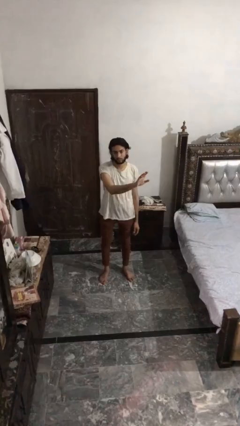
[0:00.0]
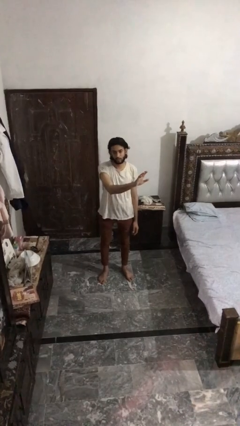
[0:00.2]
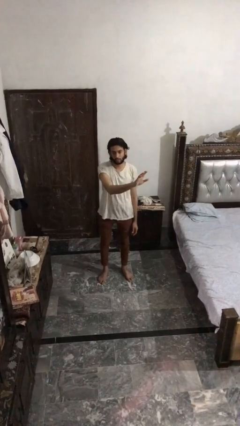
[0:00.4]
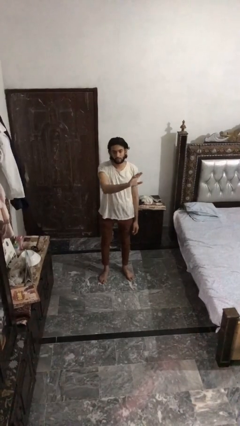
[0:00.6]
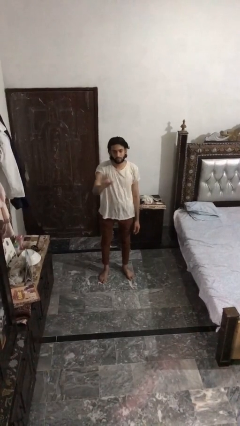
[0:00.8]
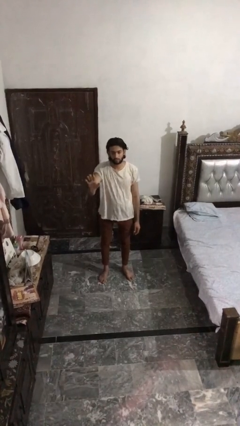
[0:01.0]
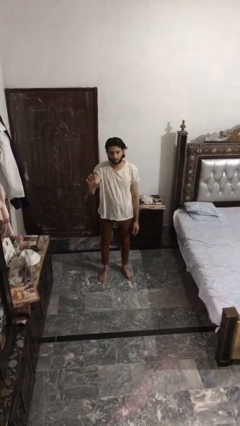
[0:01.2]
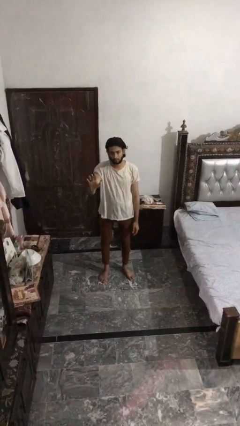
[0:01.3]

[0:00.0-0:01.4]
person gestures swipe right

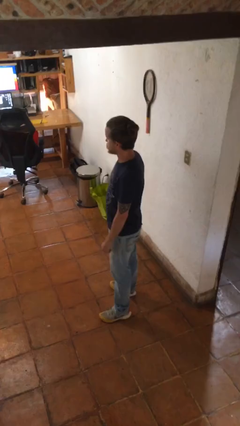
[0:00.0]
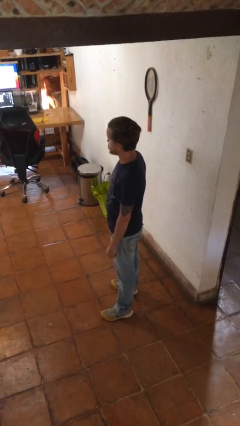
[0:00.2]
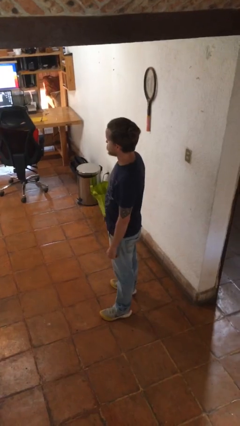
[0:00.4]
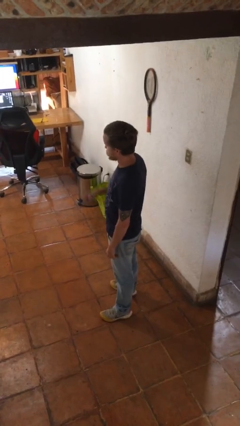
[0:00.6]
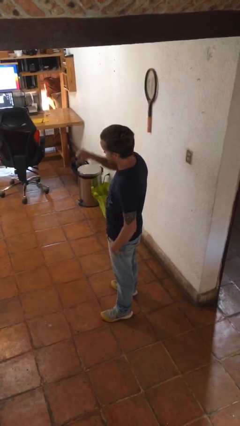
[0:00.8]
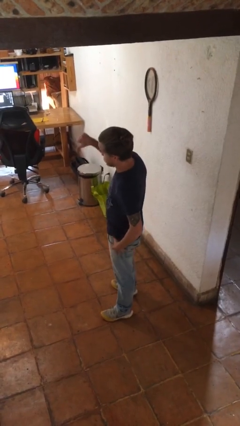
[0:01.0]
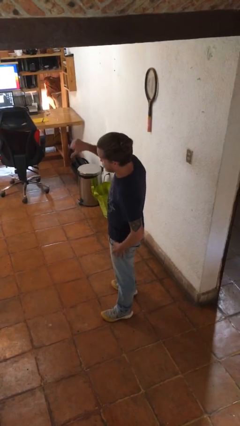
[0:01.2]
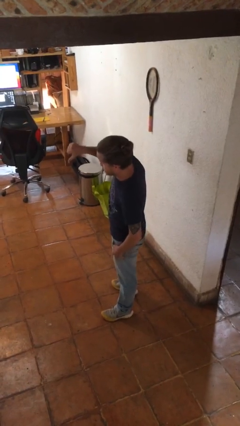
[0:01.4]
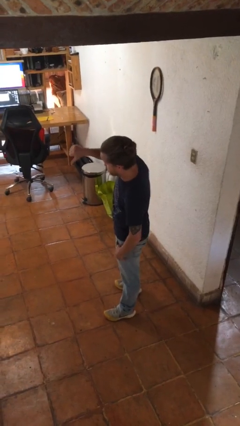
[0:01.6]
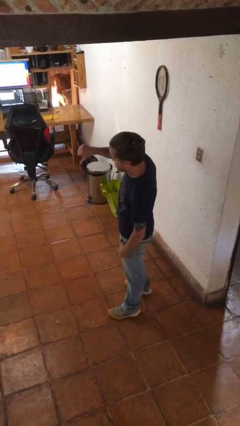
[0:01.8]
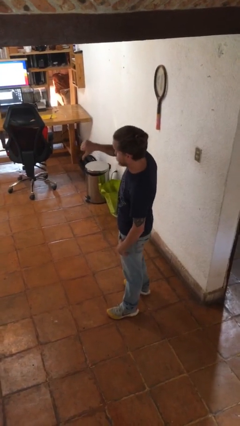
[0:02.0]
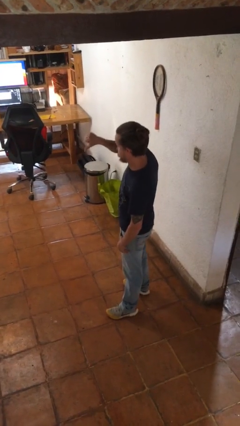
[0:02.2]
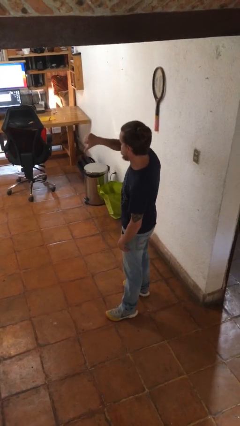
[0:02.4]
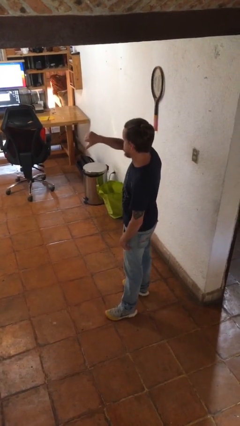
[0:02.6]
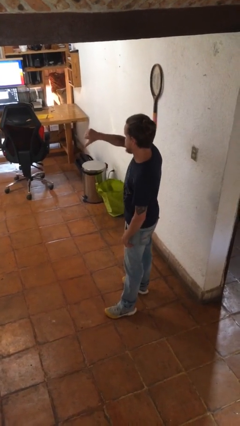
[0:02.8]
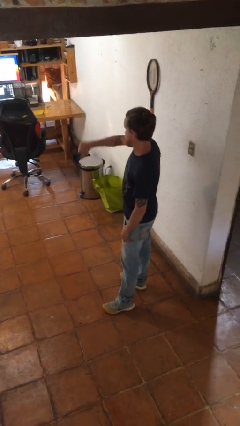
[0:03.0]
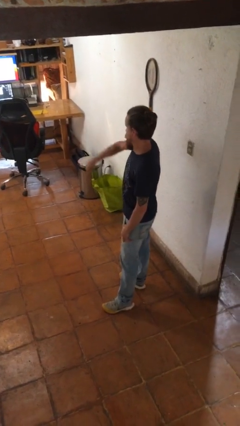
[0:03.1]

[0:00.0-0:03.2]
person gestures thumbs down

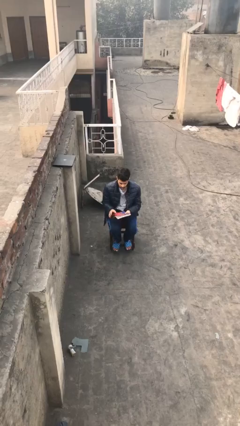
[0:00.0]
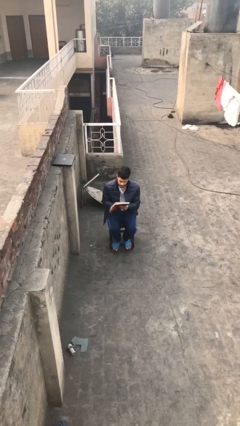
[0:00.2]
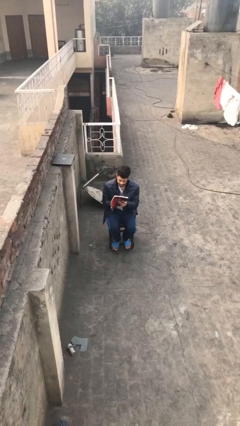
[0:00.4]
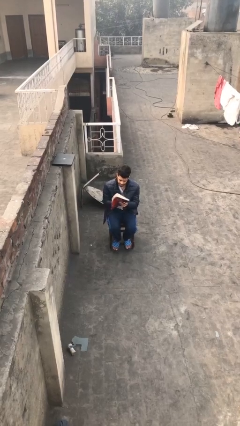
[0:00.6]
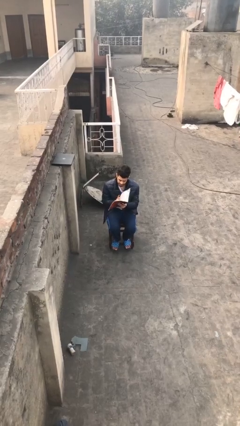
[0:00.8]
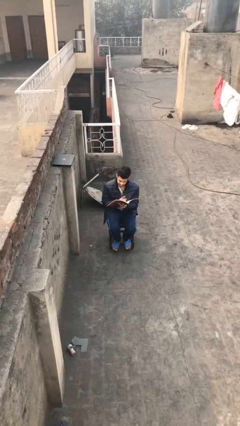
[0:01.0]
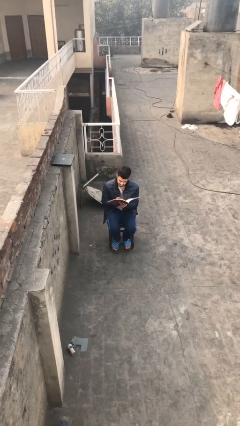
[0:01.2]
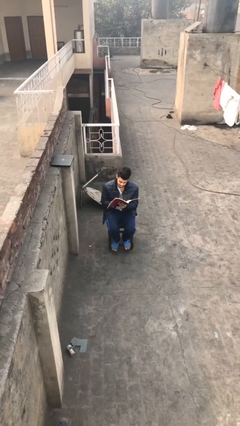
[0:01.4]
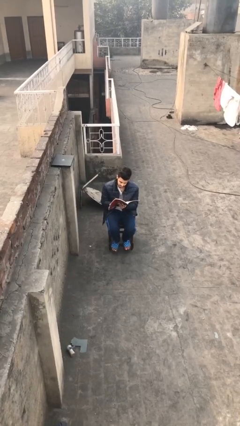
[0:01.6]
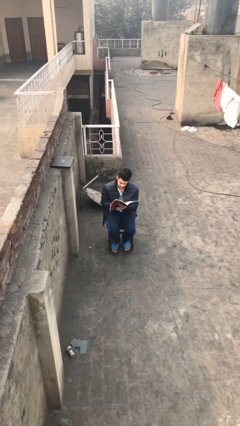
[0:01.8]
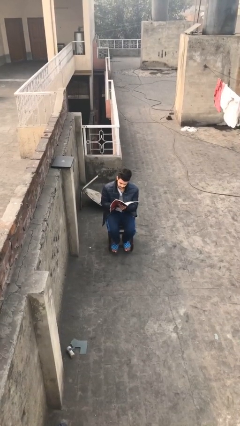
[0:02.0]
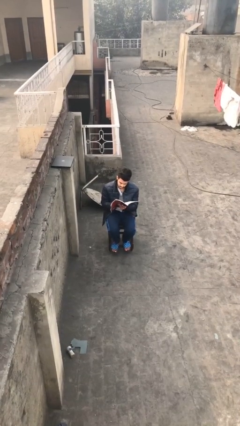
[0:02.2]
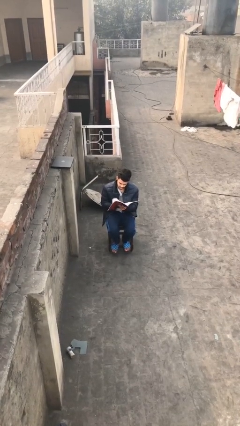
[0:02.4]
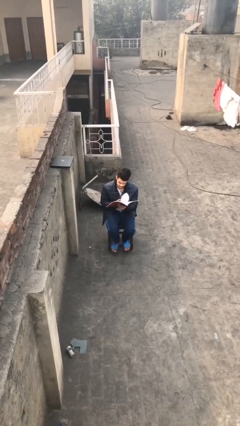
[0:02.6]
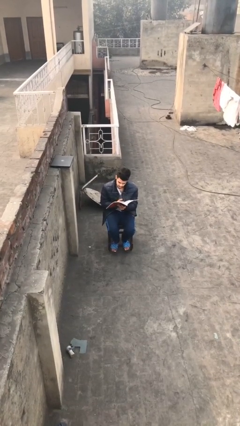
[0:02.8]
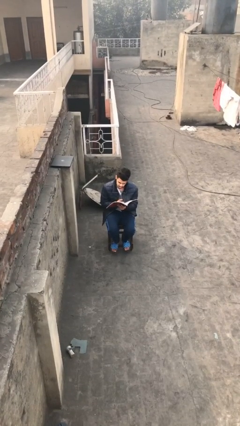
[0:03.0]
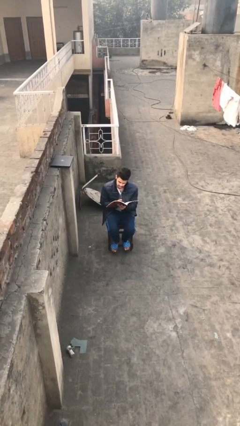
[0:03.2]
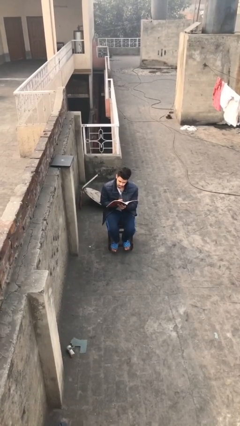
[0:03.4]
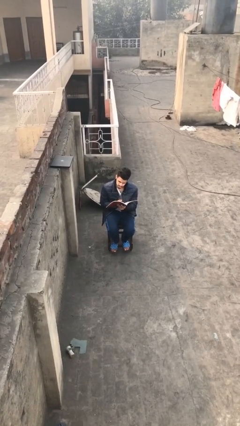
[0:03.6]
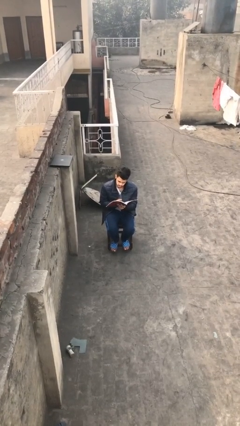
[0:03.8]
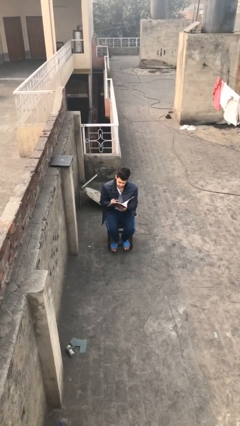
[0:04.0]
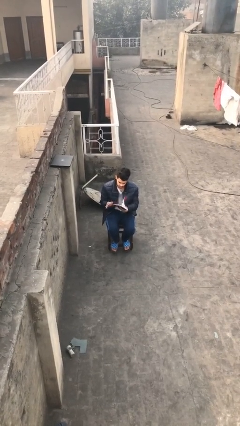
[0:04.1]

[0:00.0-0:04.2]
person reads document

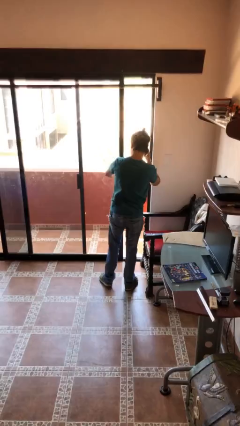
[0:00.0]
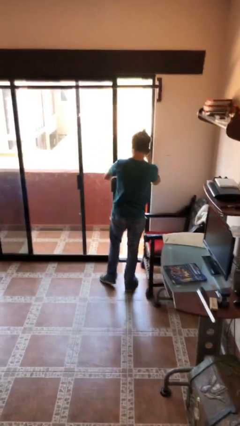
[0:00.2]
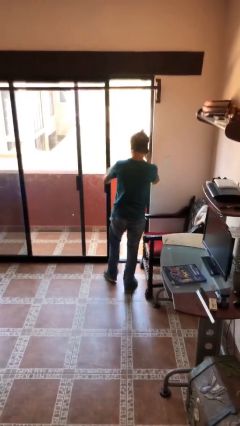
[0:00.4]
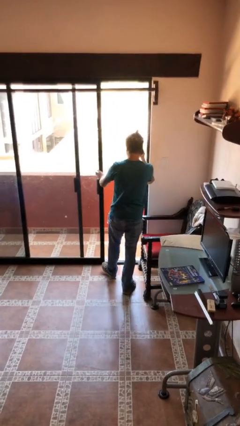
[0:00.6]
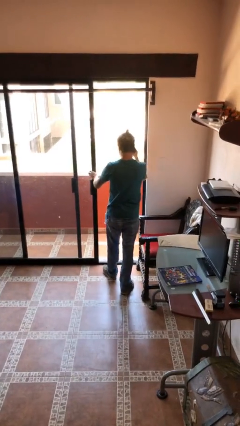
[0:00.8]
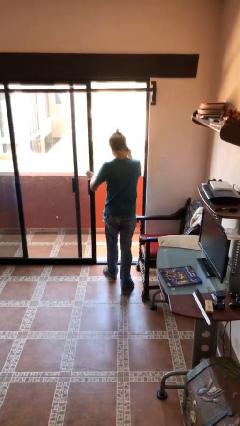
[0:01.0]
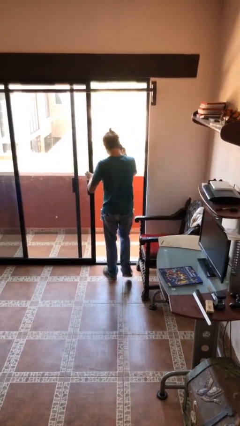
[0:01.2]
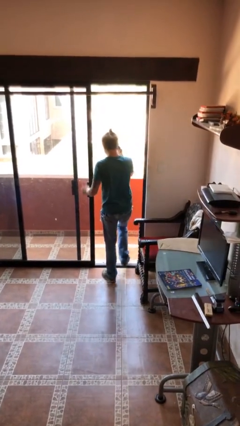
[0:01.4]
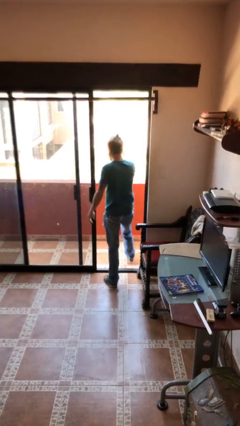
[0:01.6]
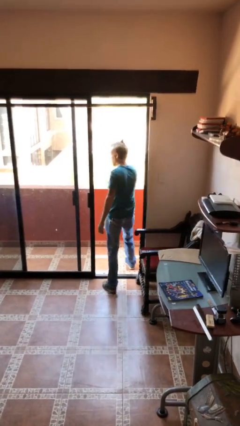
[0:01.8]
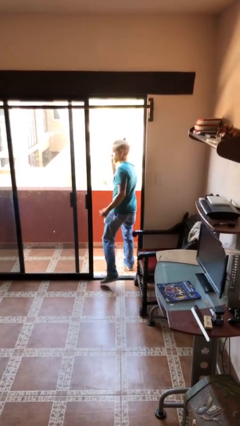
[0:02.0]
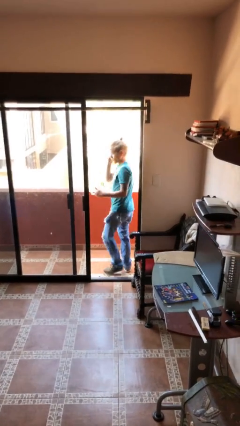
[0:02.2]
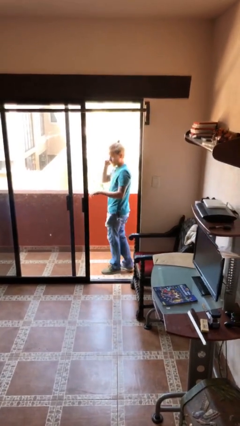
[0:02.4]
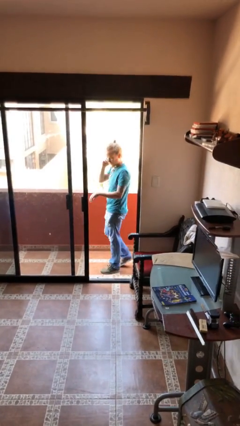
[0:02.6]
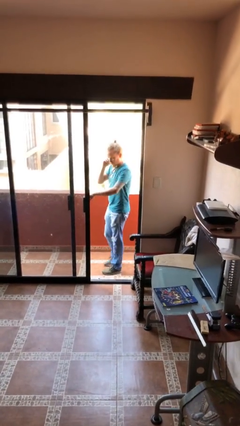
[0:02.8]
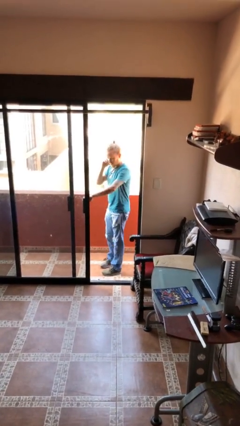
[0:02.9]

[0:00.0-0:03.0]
person exits scene through structure

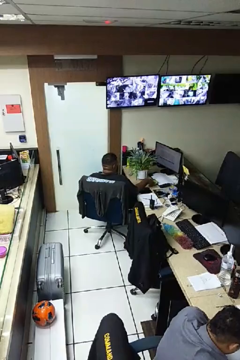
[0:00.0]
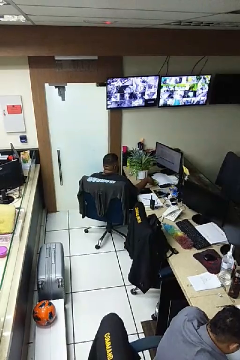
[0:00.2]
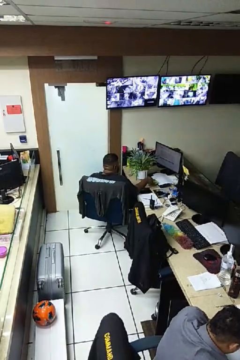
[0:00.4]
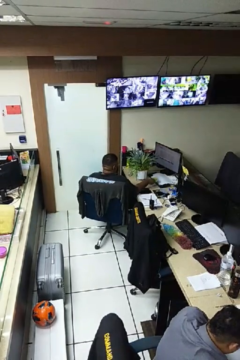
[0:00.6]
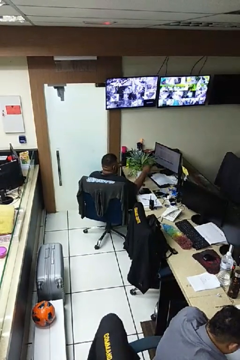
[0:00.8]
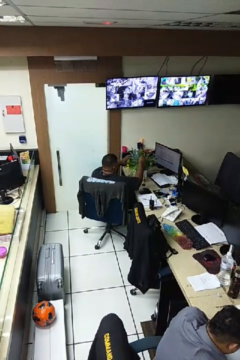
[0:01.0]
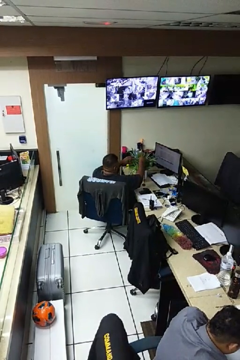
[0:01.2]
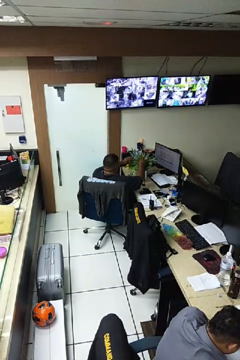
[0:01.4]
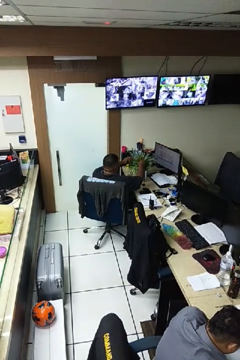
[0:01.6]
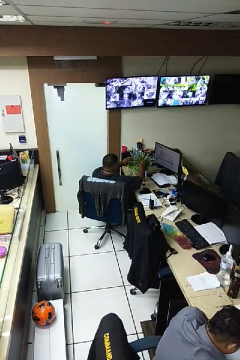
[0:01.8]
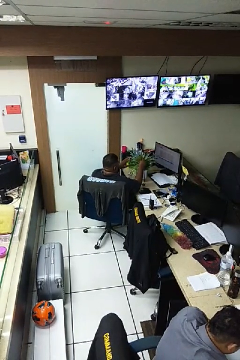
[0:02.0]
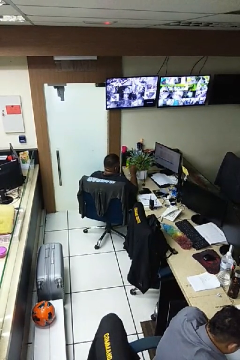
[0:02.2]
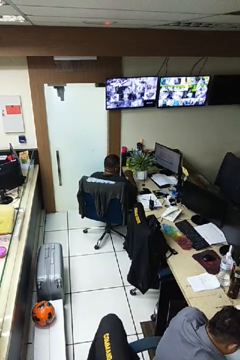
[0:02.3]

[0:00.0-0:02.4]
person arranges flowers in vase

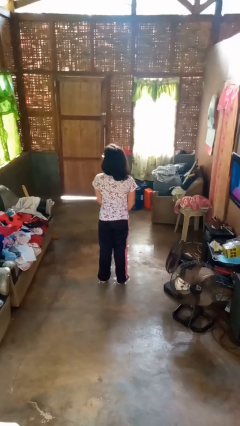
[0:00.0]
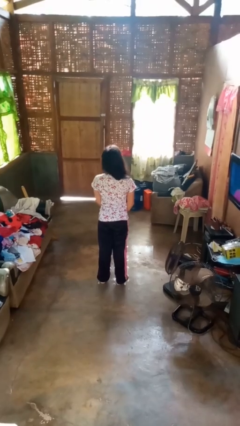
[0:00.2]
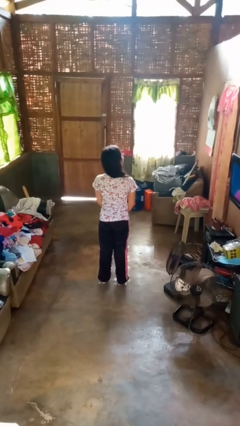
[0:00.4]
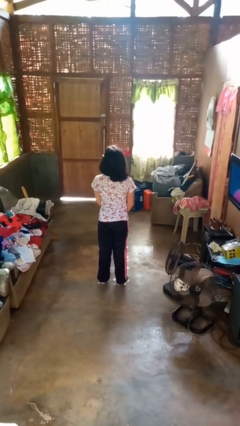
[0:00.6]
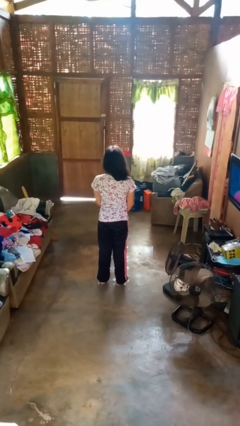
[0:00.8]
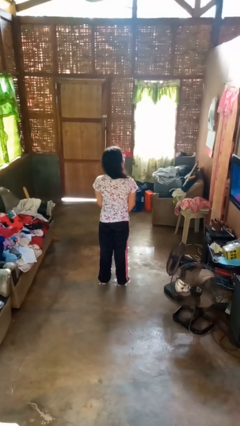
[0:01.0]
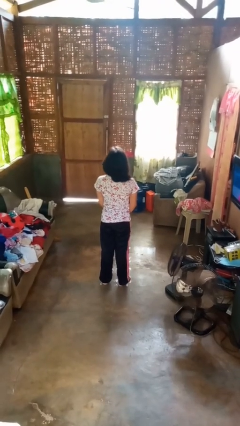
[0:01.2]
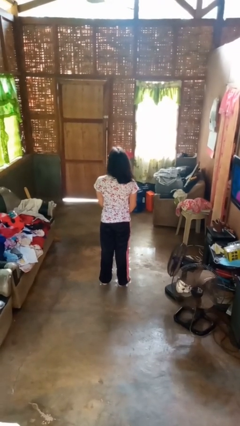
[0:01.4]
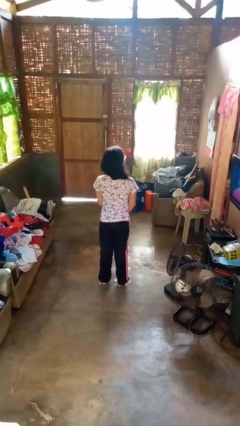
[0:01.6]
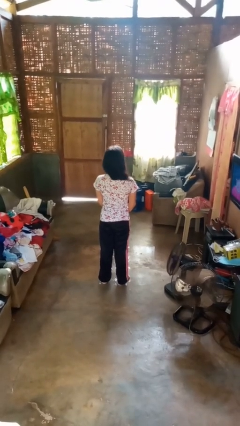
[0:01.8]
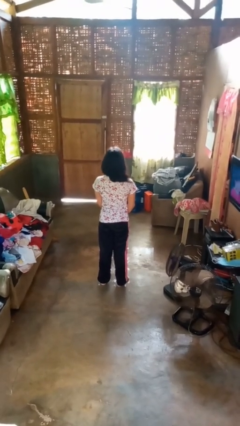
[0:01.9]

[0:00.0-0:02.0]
person shakes head

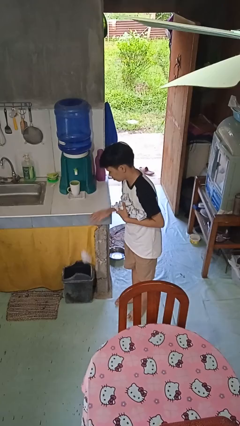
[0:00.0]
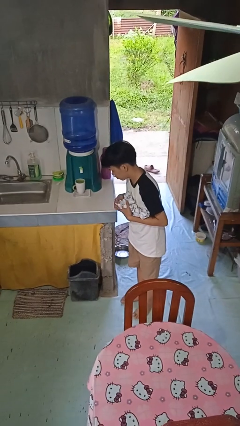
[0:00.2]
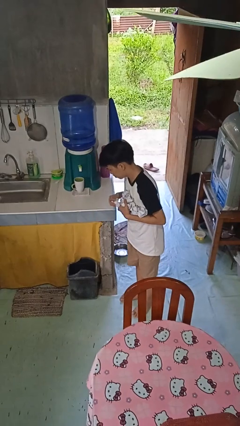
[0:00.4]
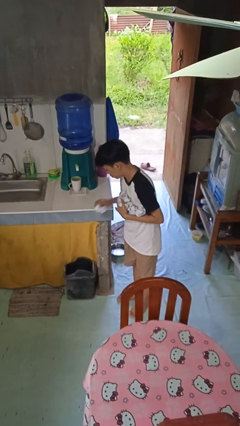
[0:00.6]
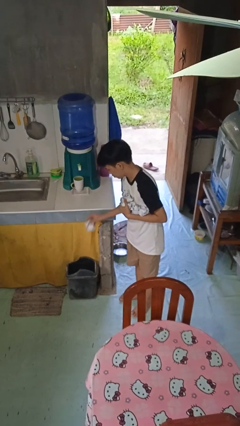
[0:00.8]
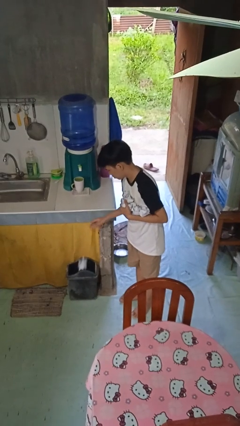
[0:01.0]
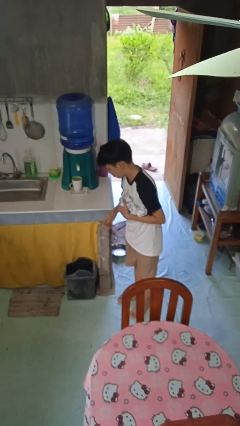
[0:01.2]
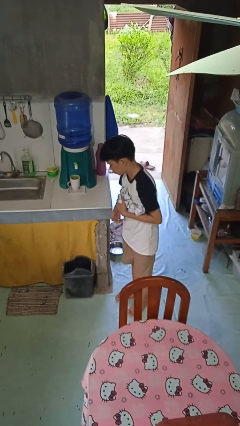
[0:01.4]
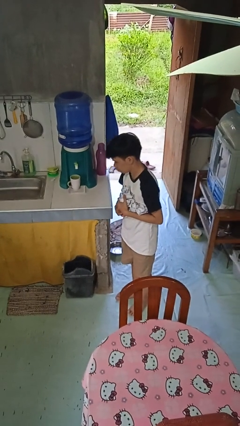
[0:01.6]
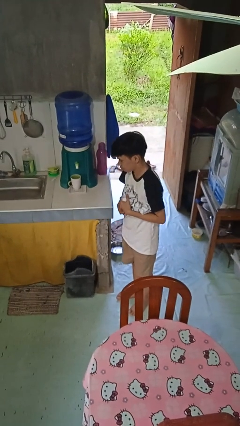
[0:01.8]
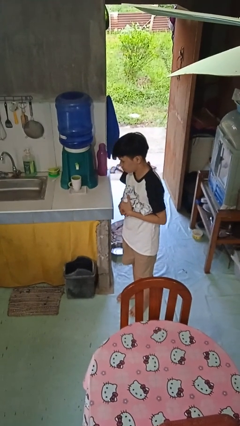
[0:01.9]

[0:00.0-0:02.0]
person discards trash
